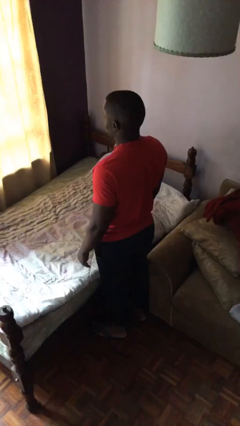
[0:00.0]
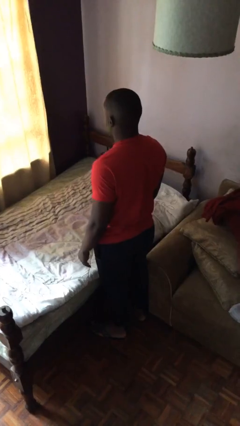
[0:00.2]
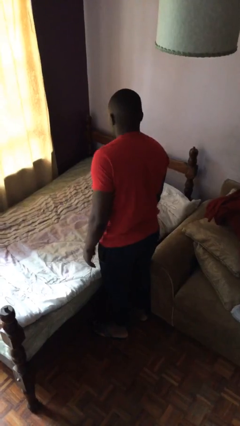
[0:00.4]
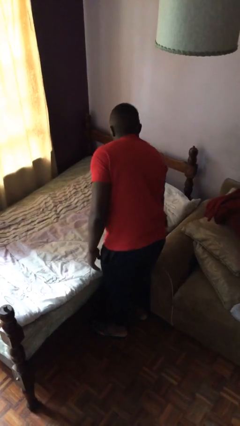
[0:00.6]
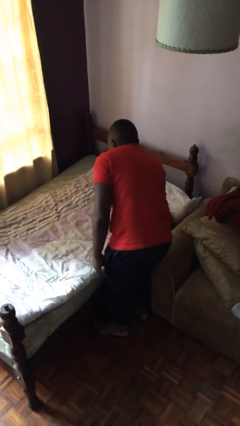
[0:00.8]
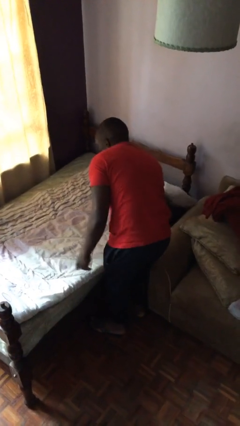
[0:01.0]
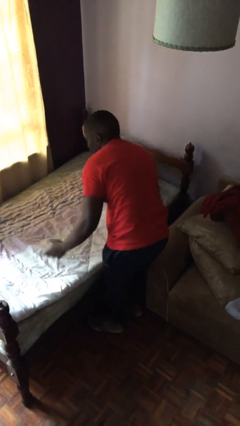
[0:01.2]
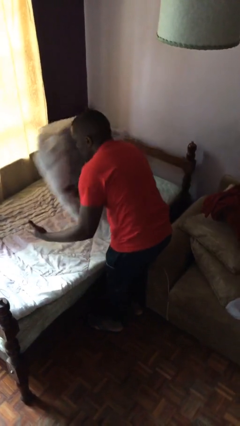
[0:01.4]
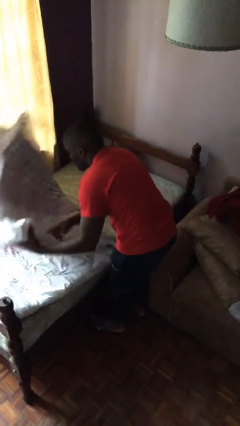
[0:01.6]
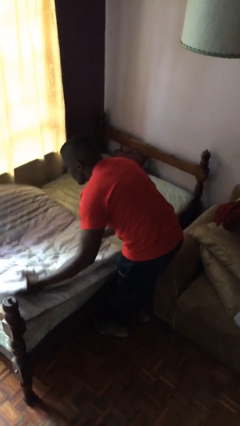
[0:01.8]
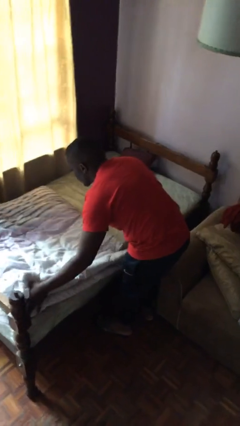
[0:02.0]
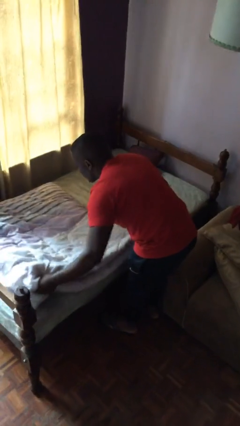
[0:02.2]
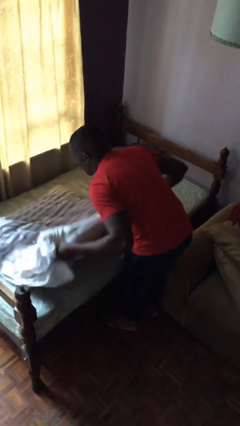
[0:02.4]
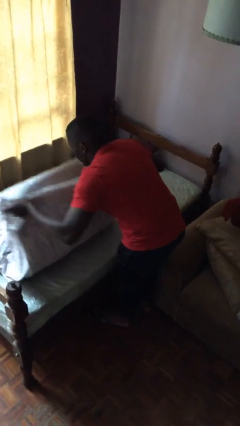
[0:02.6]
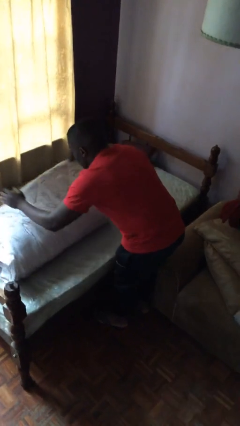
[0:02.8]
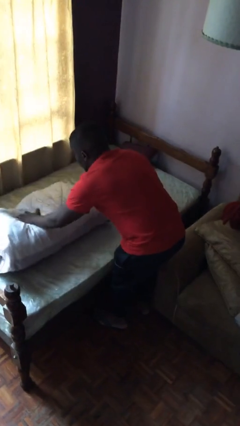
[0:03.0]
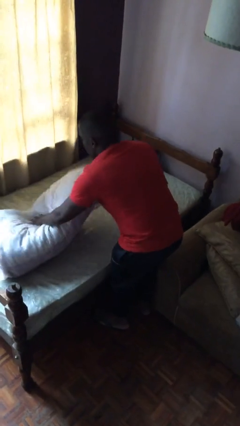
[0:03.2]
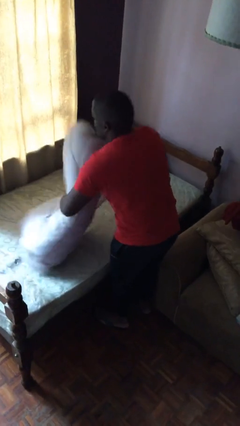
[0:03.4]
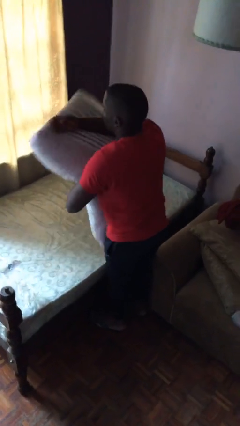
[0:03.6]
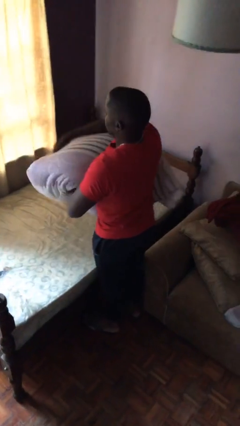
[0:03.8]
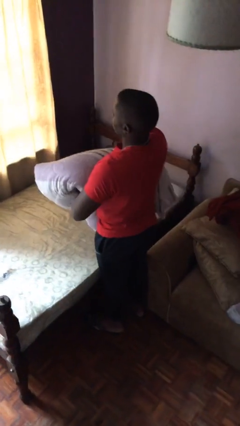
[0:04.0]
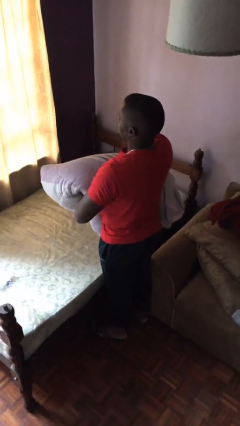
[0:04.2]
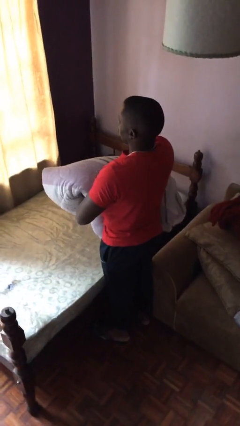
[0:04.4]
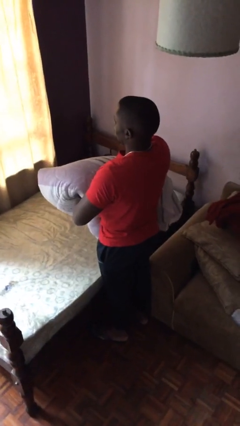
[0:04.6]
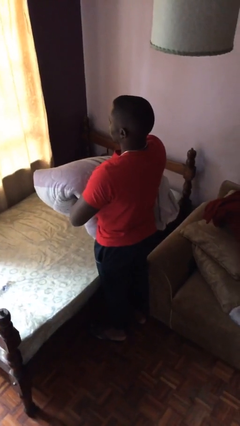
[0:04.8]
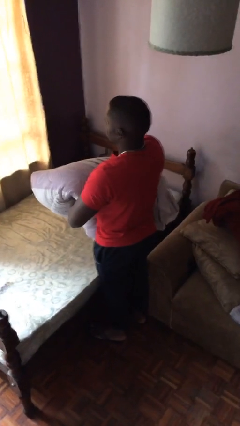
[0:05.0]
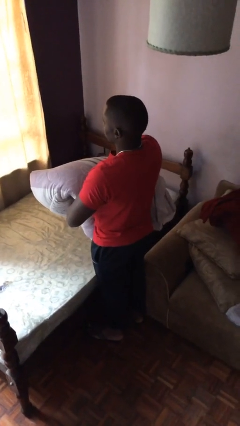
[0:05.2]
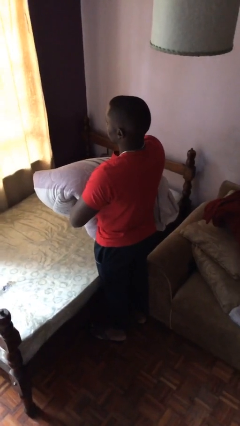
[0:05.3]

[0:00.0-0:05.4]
person folds blanket

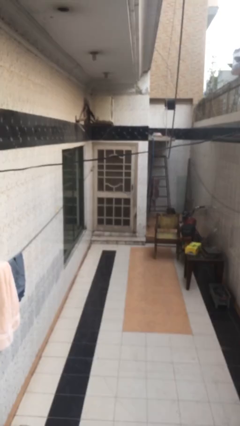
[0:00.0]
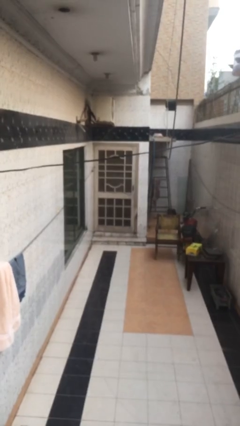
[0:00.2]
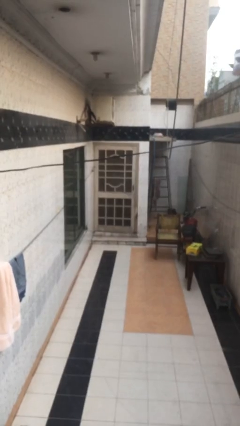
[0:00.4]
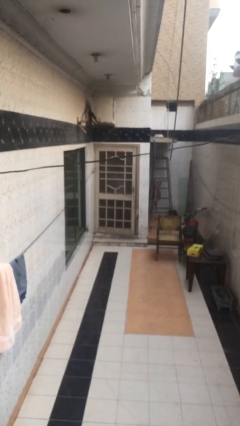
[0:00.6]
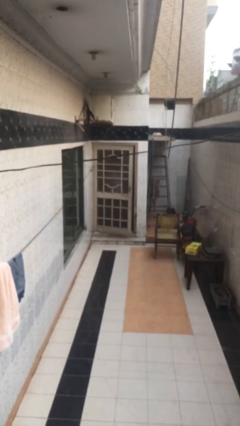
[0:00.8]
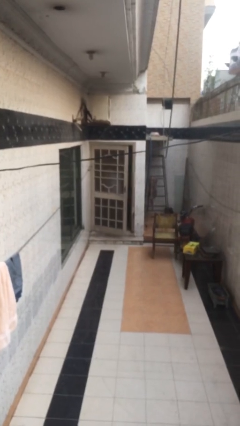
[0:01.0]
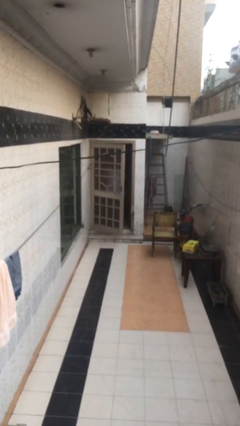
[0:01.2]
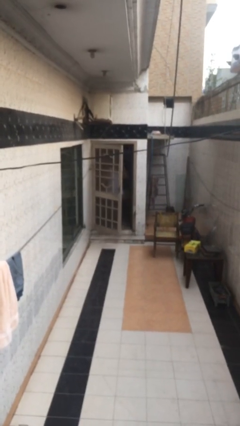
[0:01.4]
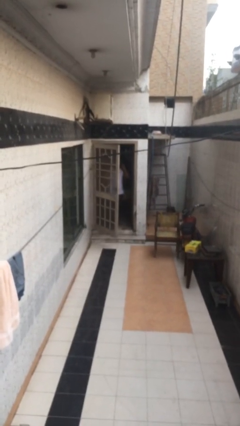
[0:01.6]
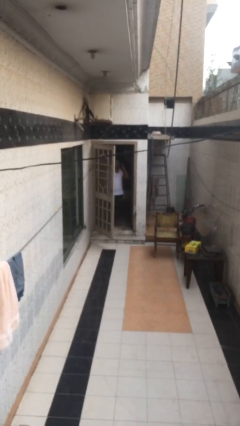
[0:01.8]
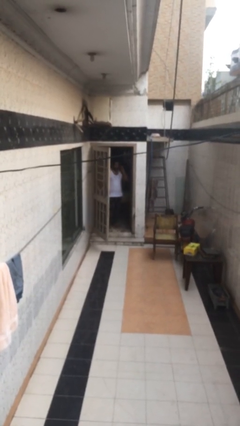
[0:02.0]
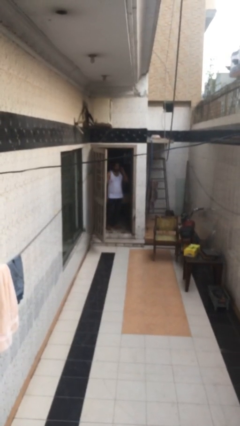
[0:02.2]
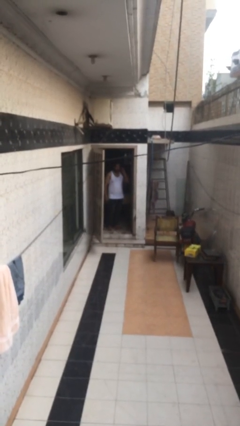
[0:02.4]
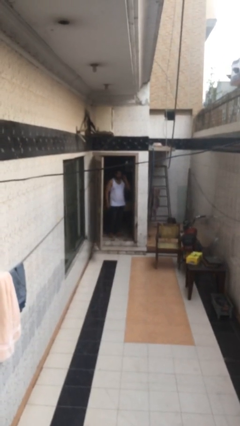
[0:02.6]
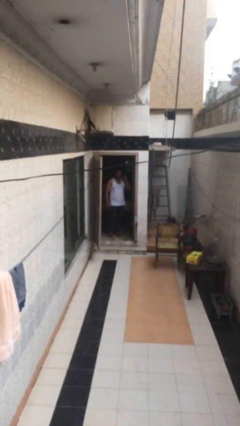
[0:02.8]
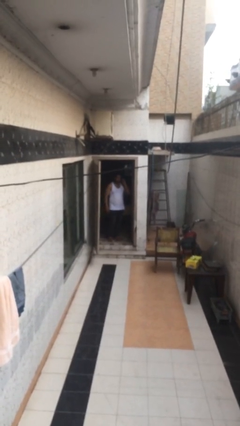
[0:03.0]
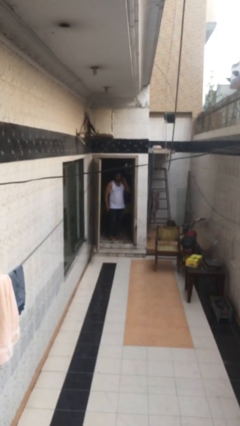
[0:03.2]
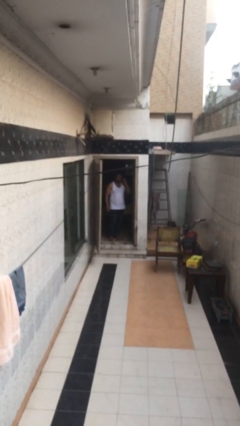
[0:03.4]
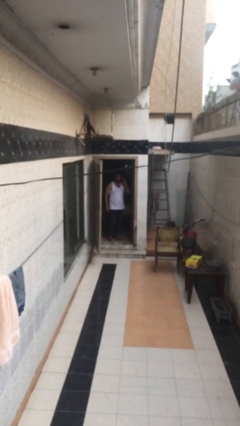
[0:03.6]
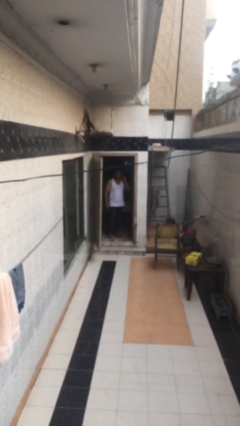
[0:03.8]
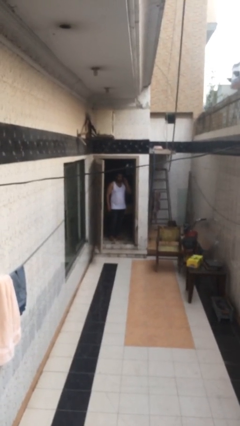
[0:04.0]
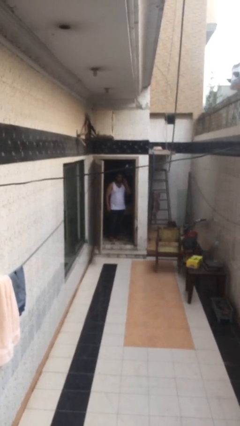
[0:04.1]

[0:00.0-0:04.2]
person opens facility door

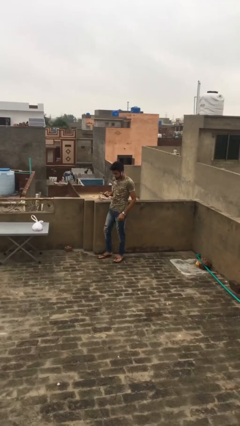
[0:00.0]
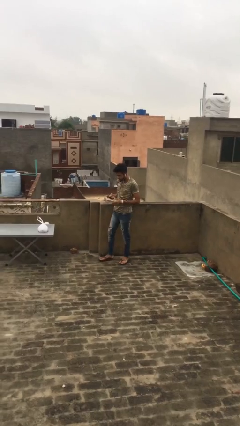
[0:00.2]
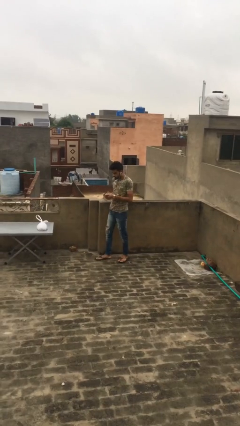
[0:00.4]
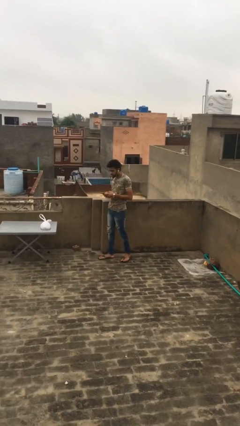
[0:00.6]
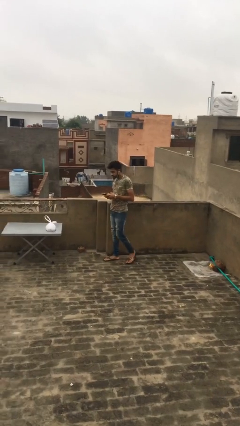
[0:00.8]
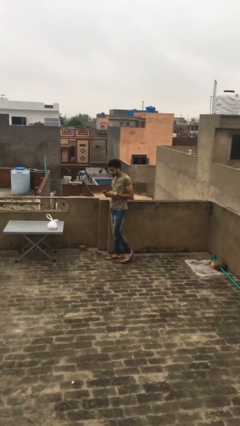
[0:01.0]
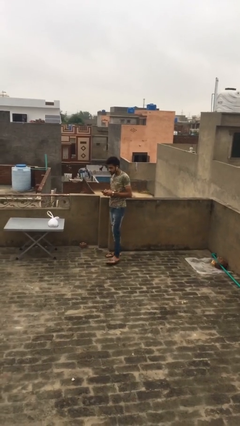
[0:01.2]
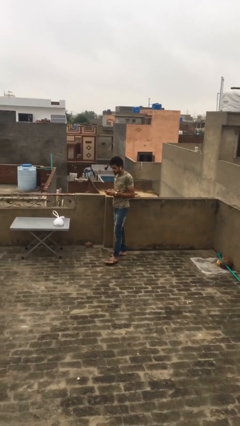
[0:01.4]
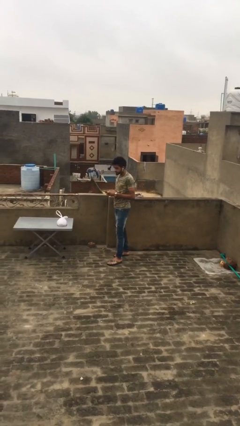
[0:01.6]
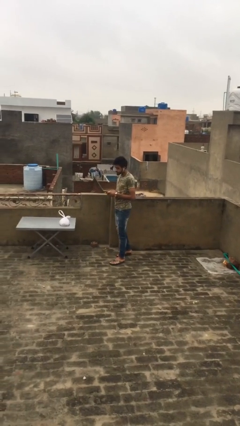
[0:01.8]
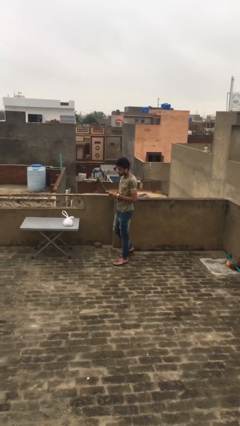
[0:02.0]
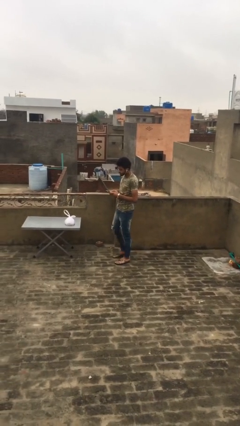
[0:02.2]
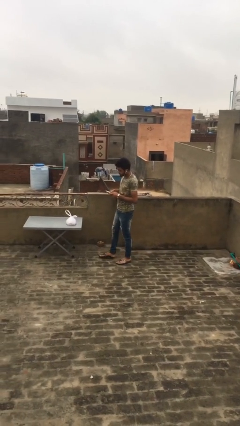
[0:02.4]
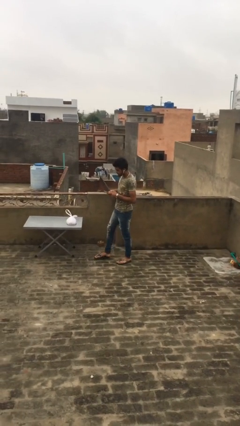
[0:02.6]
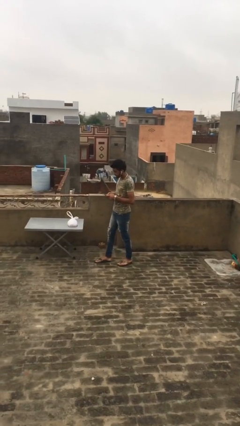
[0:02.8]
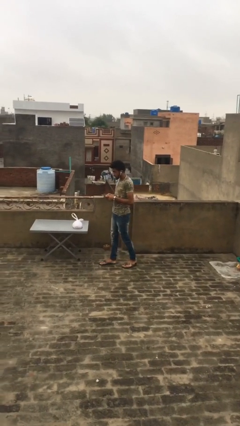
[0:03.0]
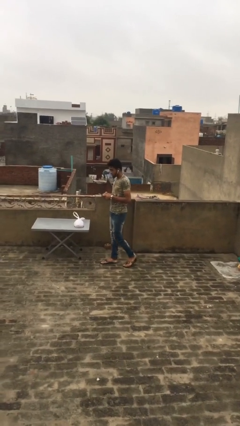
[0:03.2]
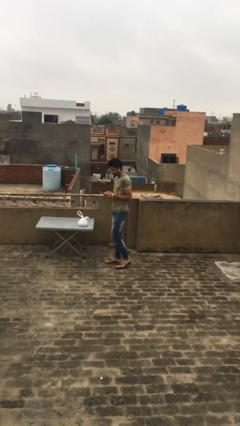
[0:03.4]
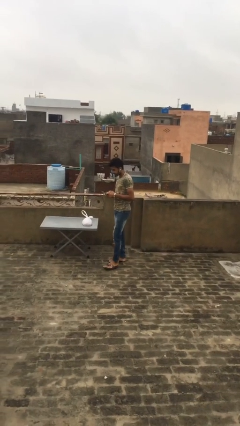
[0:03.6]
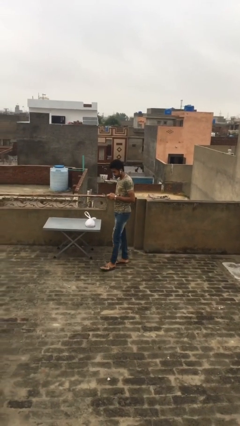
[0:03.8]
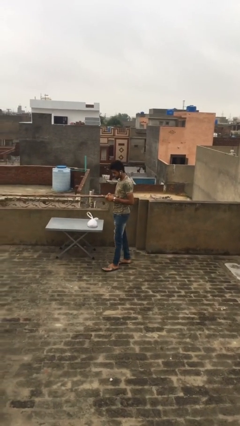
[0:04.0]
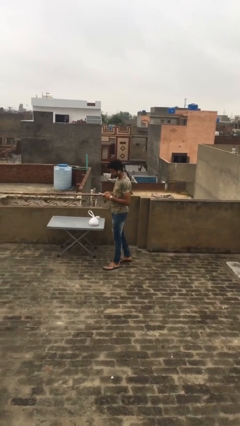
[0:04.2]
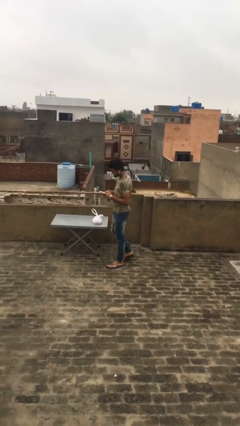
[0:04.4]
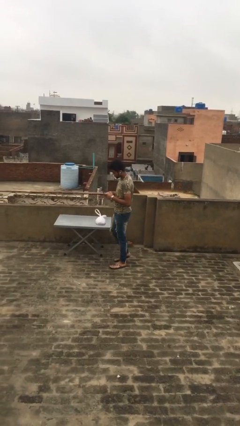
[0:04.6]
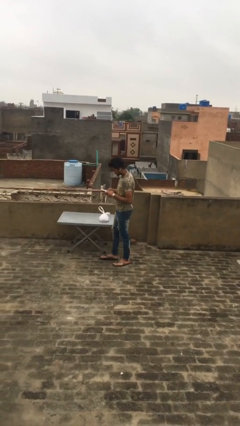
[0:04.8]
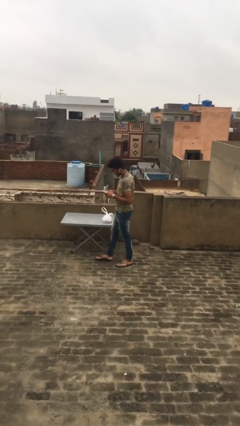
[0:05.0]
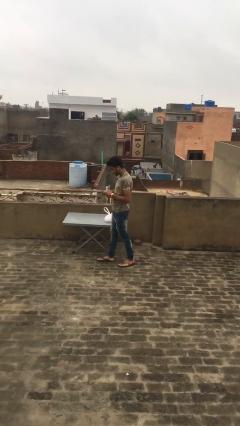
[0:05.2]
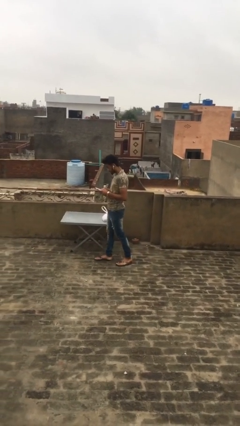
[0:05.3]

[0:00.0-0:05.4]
person texts on phone

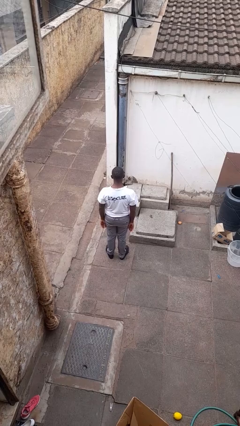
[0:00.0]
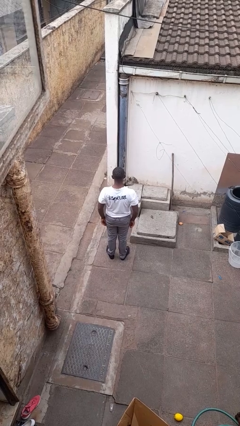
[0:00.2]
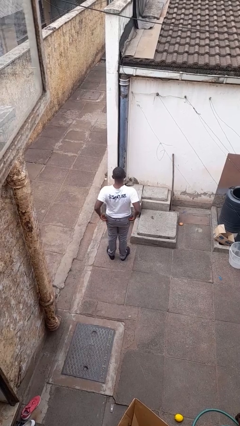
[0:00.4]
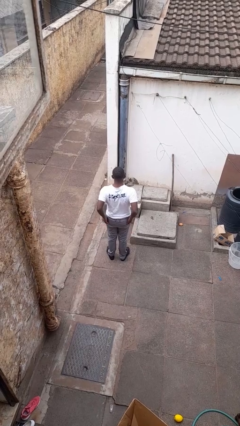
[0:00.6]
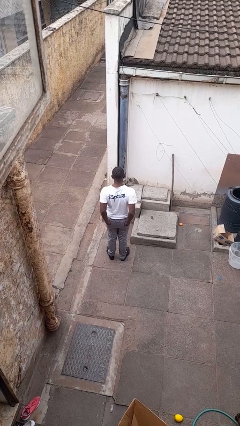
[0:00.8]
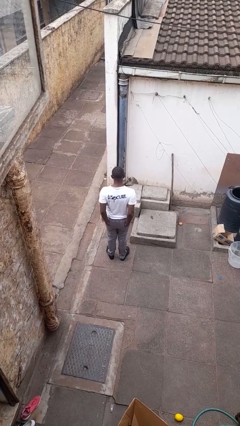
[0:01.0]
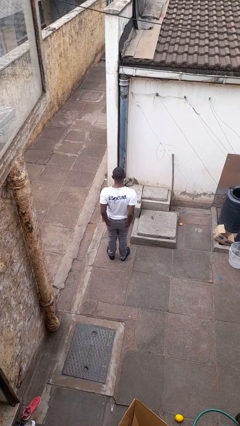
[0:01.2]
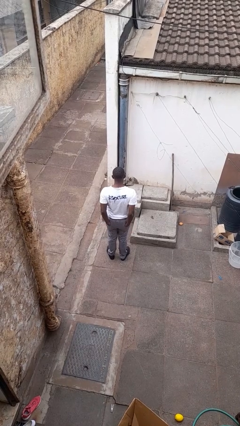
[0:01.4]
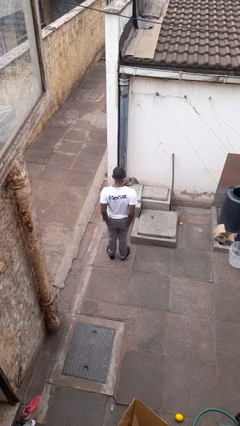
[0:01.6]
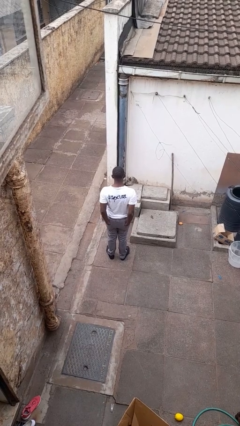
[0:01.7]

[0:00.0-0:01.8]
person puts hands in back pockets

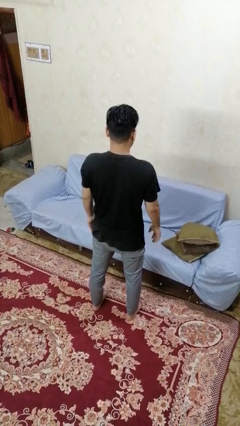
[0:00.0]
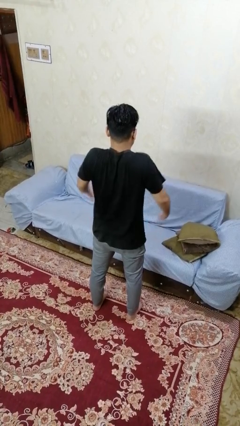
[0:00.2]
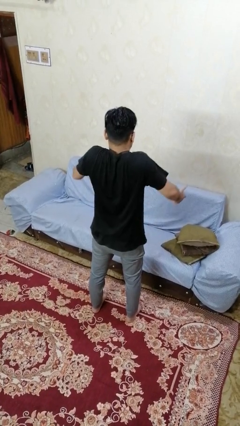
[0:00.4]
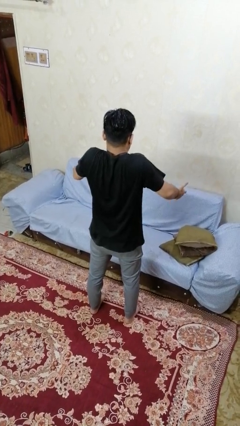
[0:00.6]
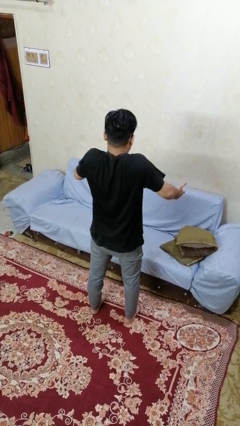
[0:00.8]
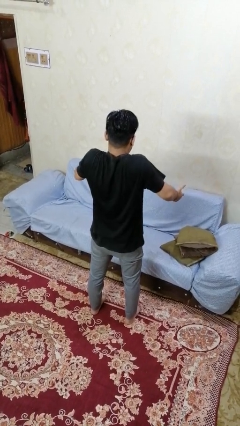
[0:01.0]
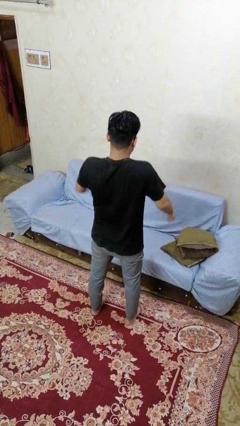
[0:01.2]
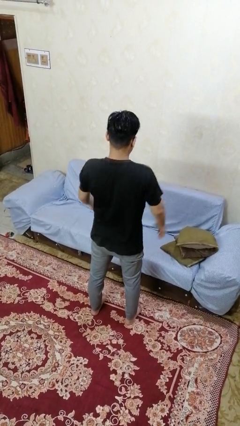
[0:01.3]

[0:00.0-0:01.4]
person shrugs
